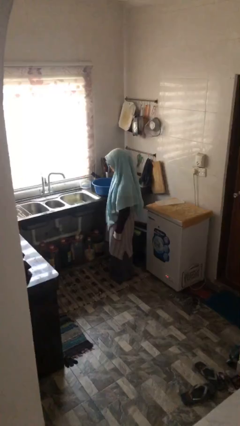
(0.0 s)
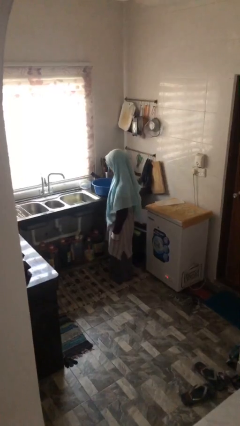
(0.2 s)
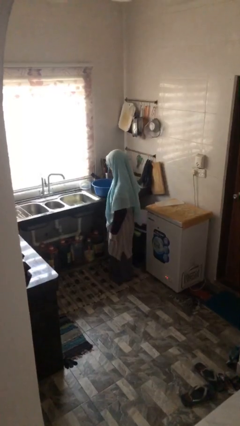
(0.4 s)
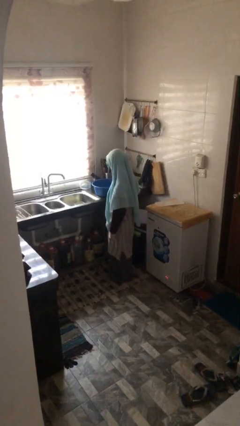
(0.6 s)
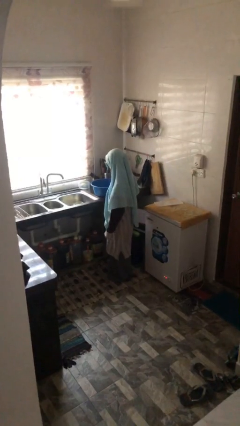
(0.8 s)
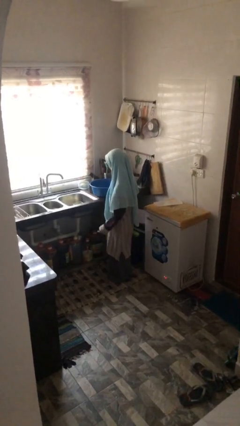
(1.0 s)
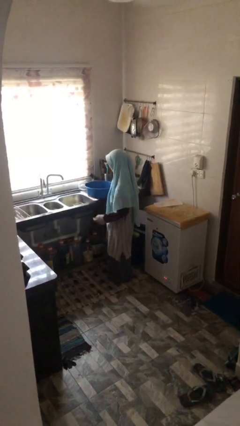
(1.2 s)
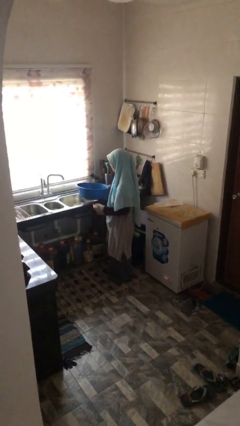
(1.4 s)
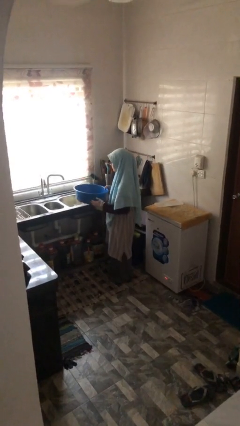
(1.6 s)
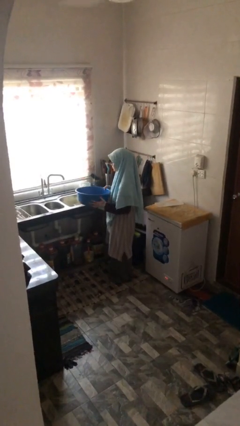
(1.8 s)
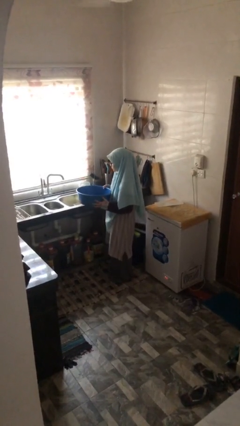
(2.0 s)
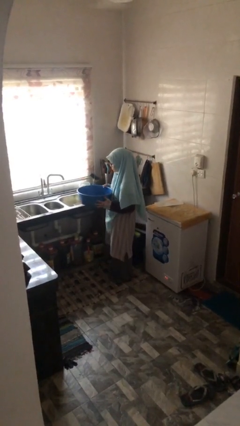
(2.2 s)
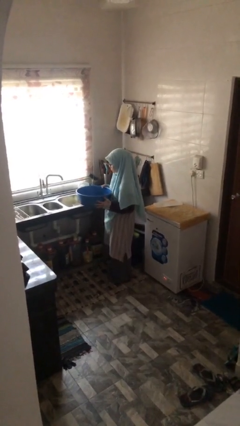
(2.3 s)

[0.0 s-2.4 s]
person picks up object from countertop

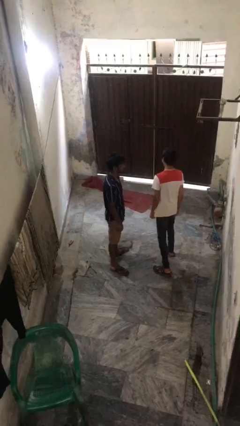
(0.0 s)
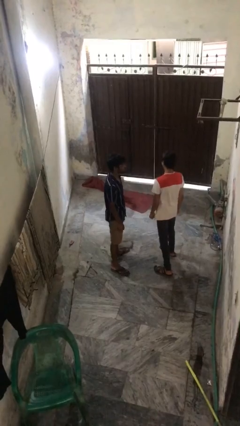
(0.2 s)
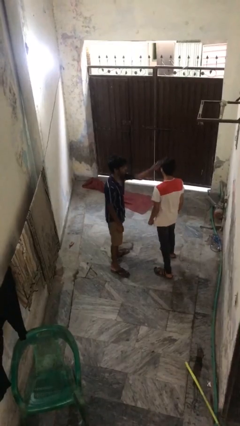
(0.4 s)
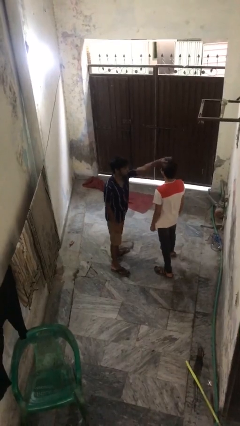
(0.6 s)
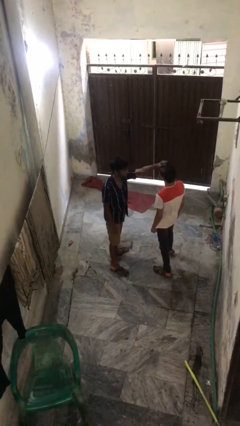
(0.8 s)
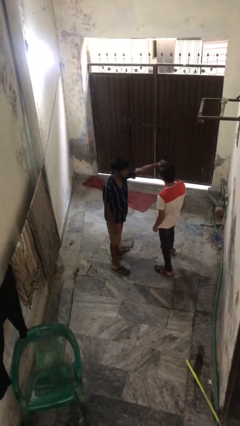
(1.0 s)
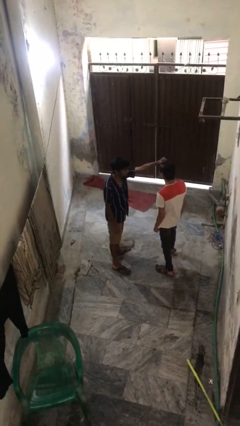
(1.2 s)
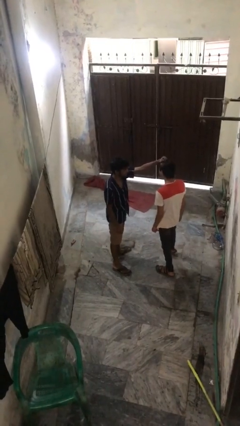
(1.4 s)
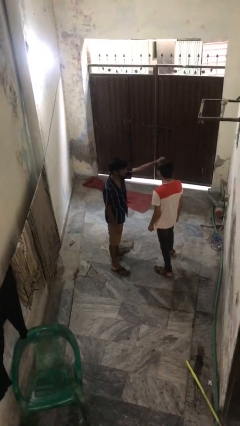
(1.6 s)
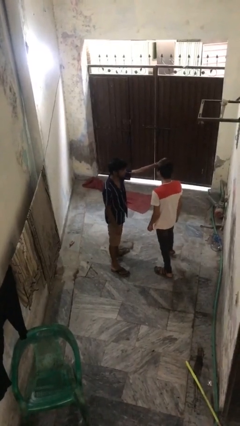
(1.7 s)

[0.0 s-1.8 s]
person grabs person by hair

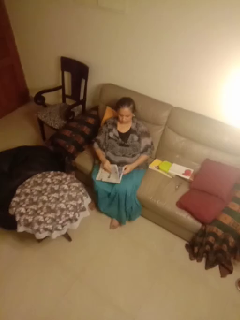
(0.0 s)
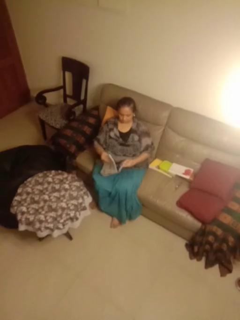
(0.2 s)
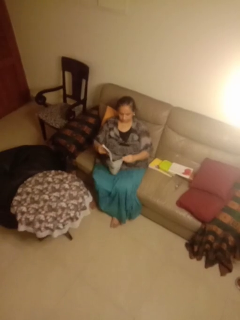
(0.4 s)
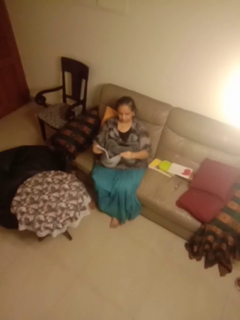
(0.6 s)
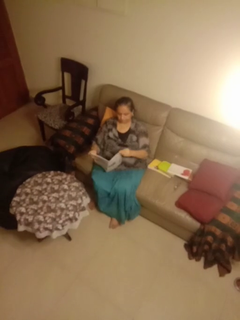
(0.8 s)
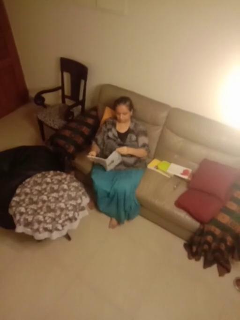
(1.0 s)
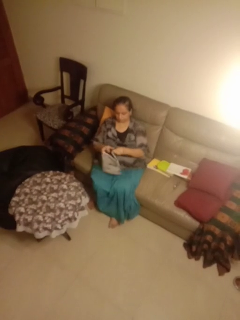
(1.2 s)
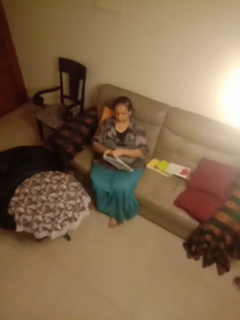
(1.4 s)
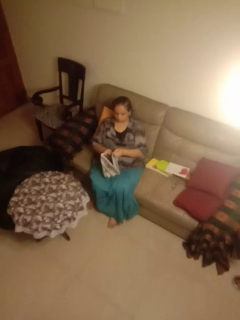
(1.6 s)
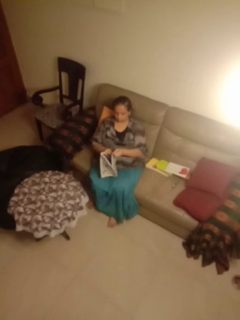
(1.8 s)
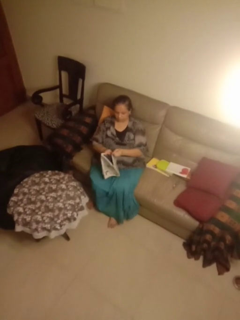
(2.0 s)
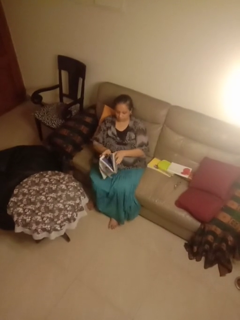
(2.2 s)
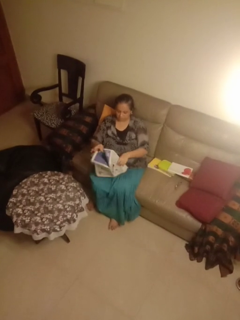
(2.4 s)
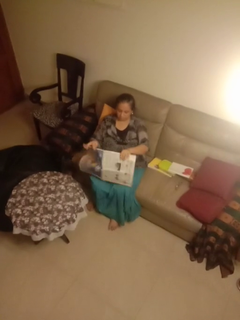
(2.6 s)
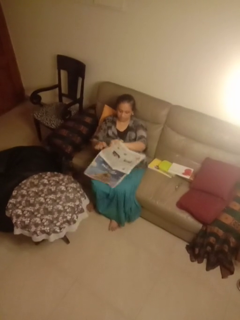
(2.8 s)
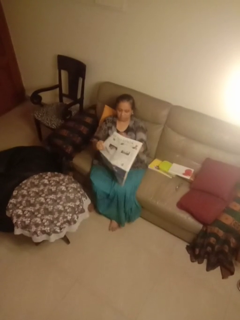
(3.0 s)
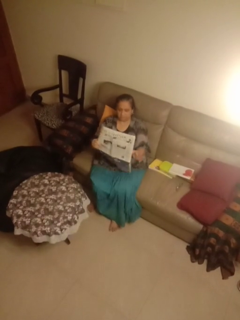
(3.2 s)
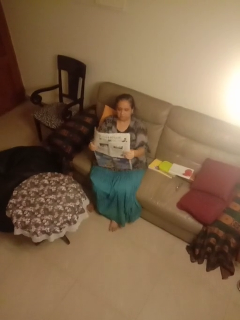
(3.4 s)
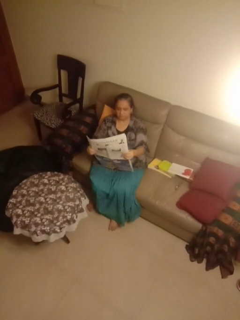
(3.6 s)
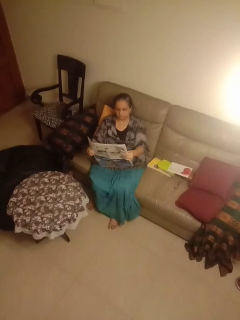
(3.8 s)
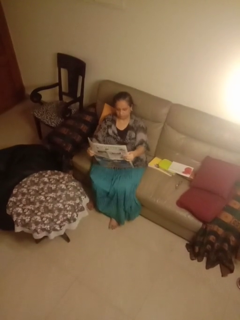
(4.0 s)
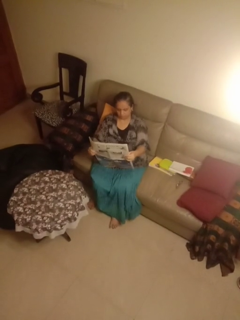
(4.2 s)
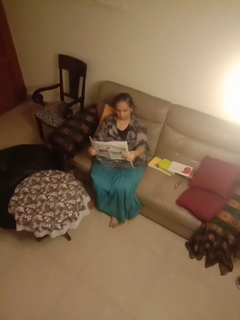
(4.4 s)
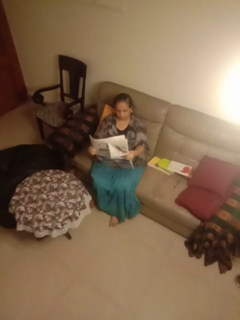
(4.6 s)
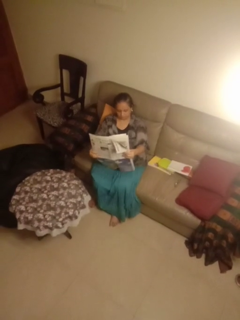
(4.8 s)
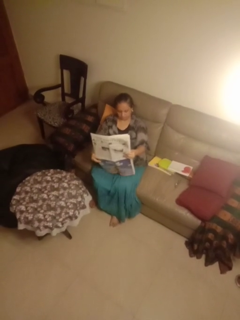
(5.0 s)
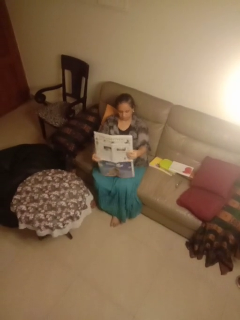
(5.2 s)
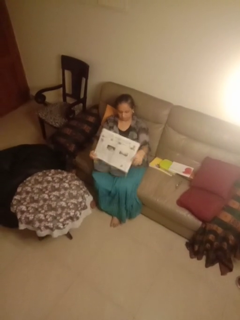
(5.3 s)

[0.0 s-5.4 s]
person reads newspaper

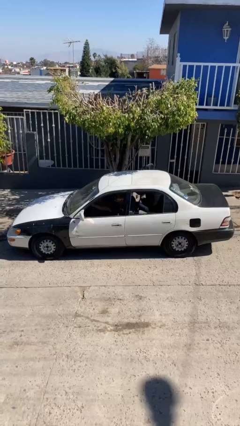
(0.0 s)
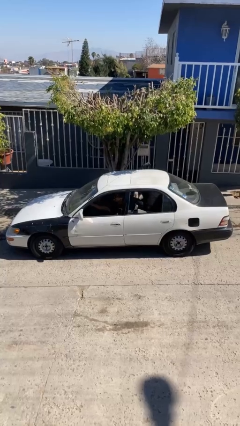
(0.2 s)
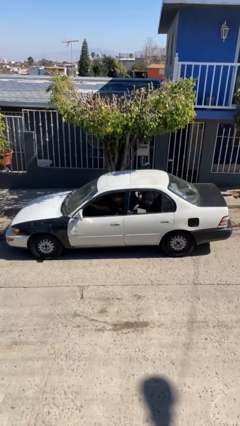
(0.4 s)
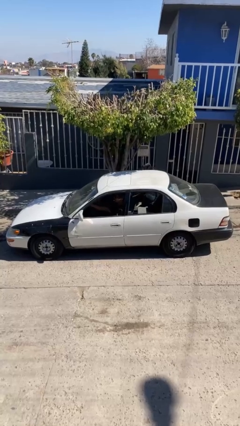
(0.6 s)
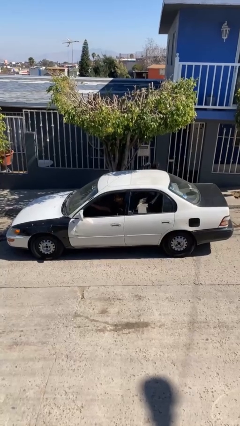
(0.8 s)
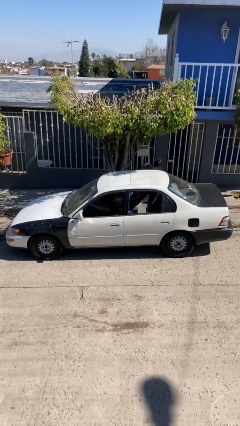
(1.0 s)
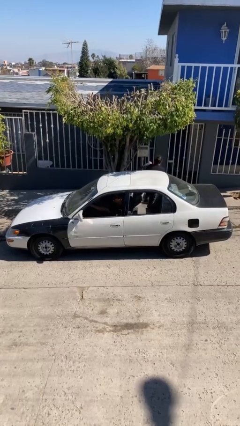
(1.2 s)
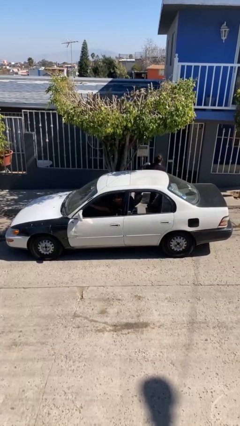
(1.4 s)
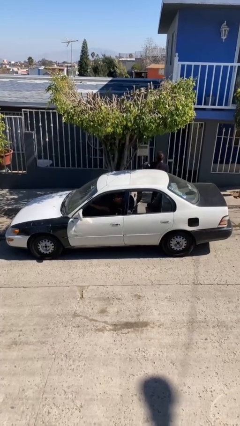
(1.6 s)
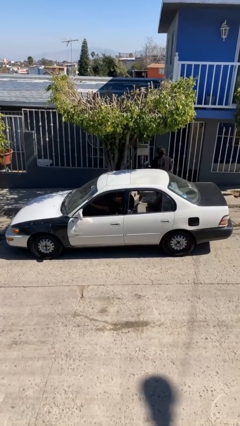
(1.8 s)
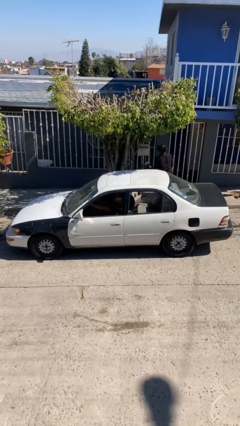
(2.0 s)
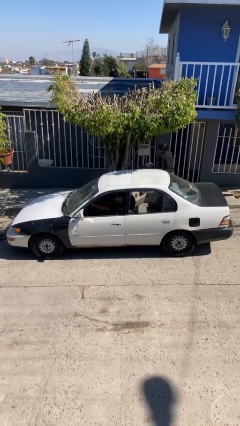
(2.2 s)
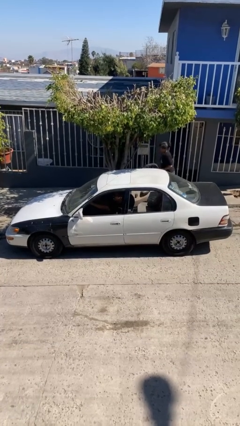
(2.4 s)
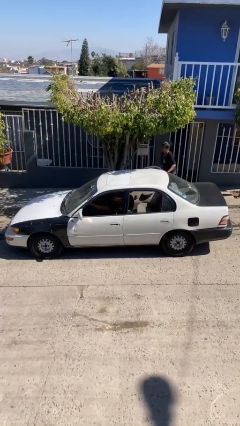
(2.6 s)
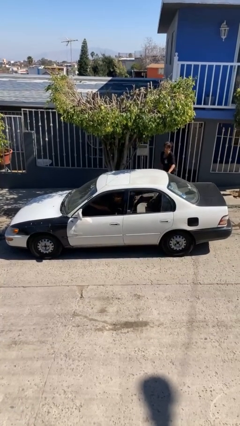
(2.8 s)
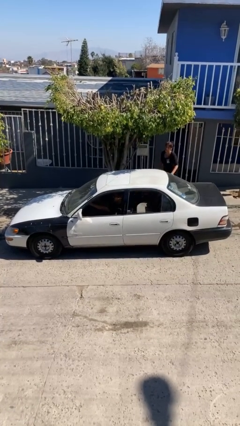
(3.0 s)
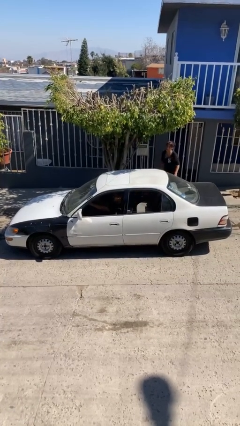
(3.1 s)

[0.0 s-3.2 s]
car drops off person

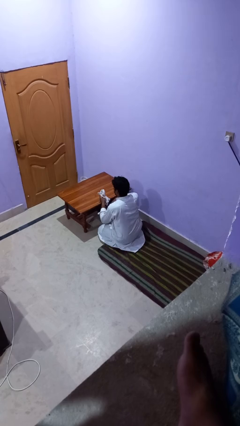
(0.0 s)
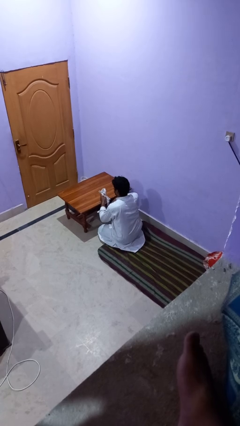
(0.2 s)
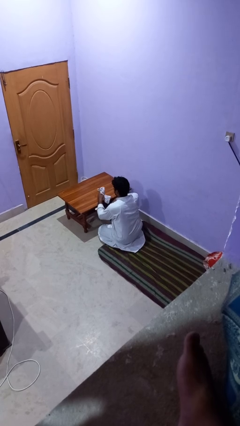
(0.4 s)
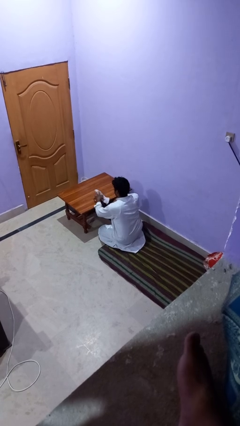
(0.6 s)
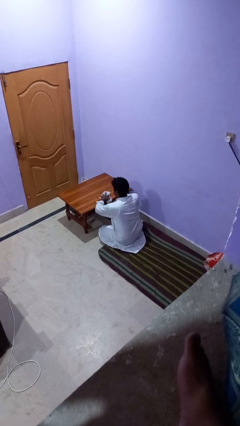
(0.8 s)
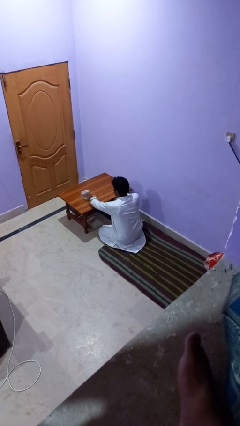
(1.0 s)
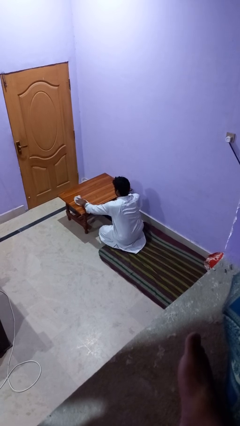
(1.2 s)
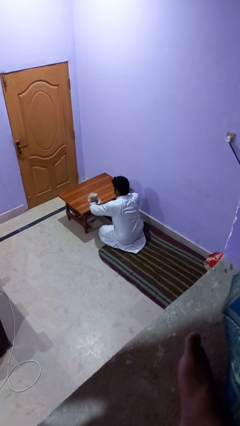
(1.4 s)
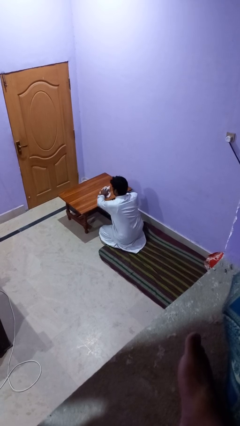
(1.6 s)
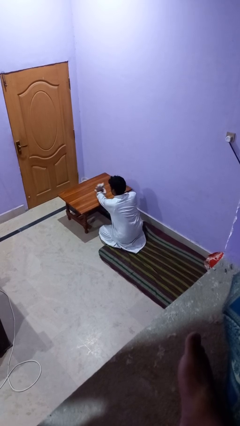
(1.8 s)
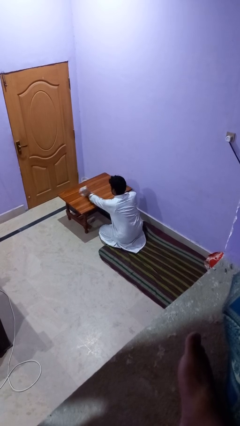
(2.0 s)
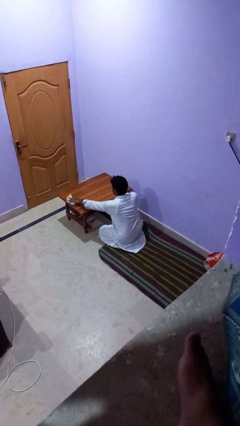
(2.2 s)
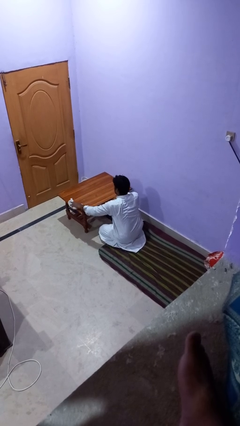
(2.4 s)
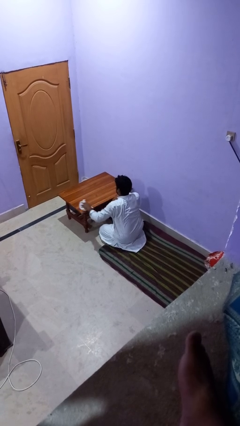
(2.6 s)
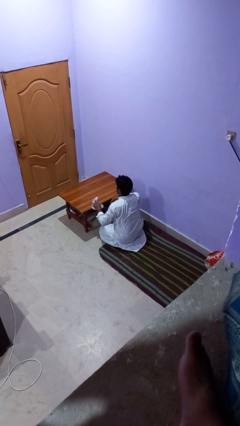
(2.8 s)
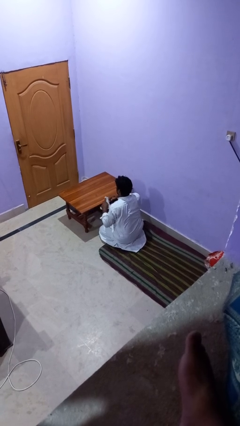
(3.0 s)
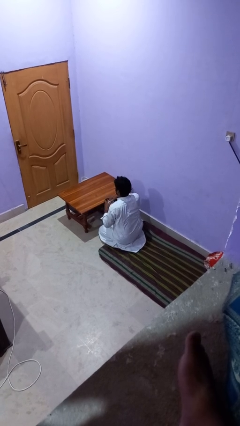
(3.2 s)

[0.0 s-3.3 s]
person cleans table with rag

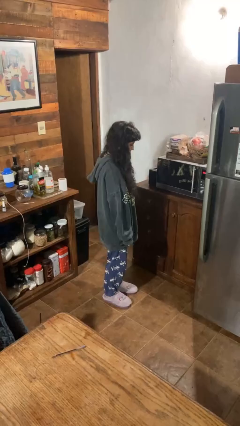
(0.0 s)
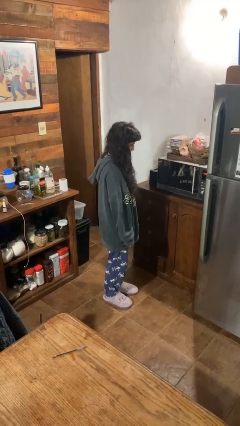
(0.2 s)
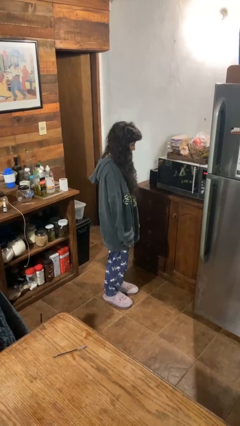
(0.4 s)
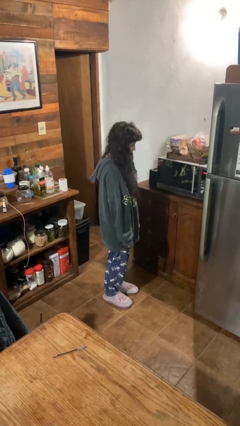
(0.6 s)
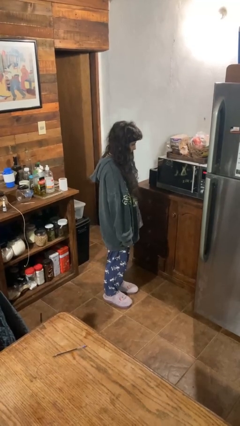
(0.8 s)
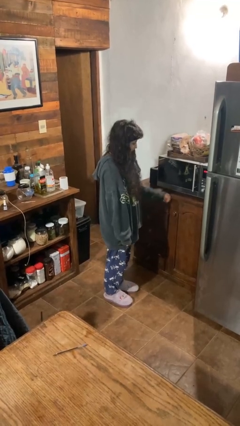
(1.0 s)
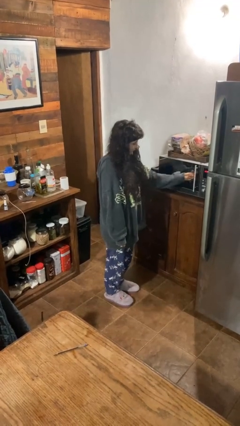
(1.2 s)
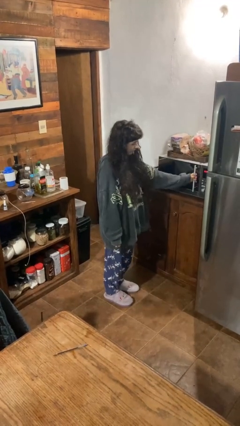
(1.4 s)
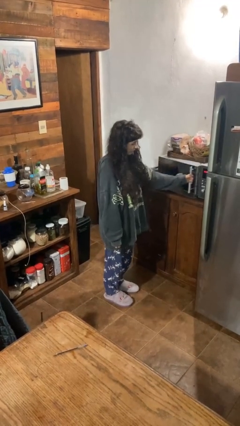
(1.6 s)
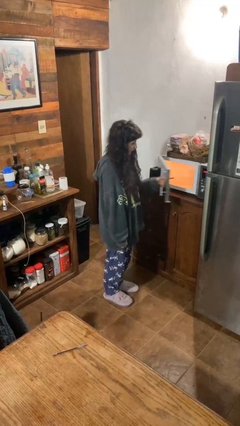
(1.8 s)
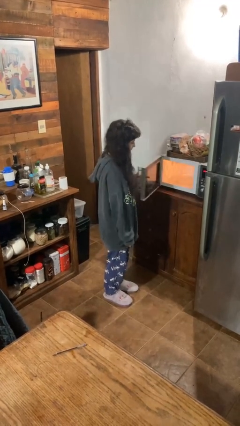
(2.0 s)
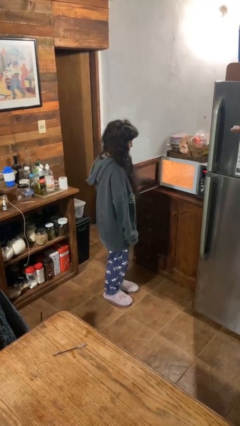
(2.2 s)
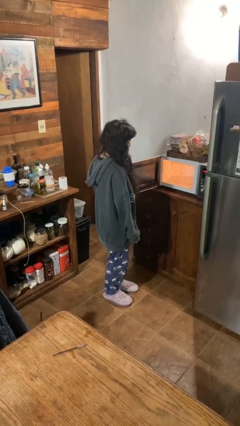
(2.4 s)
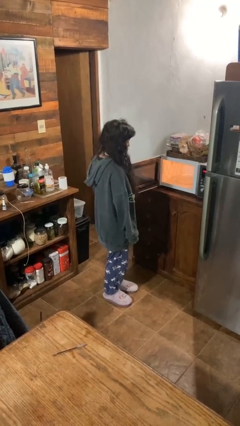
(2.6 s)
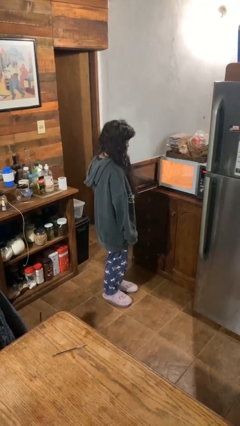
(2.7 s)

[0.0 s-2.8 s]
person opens microwave
